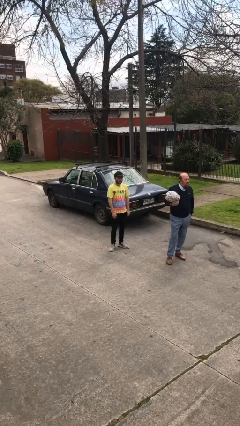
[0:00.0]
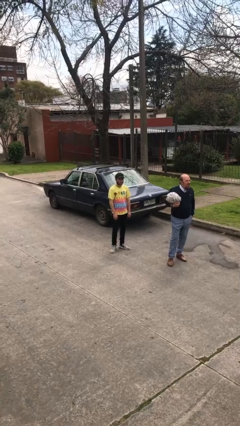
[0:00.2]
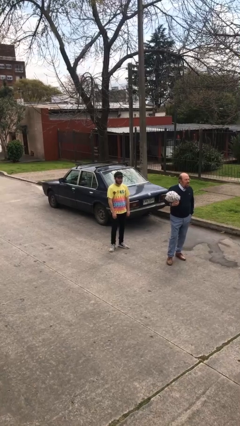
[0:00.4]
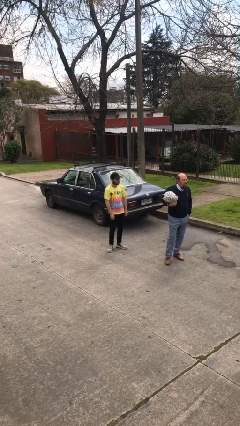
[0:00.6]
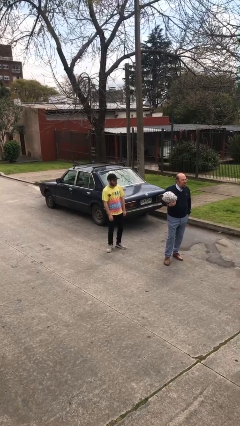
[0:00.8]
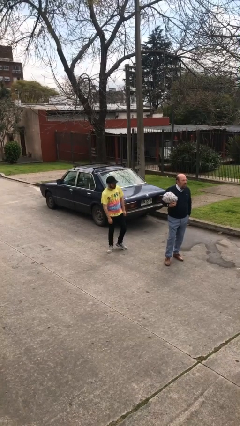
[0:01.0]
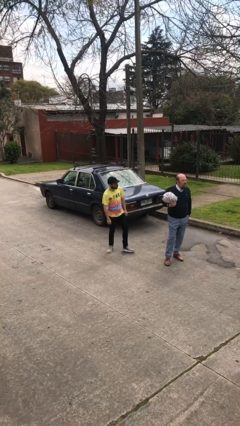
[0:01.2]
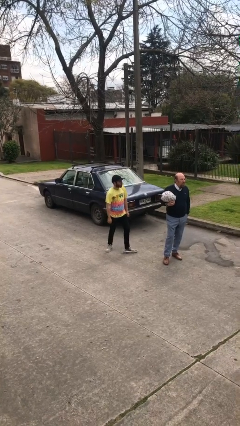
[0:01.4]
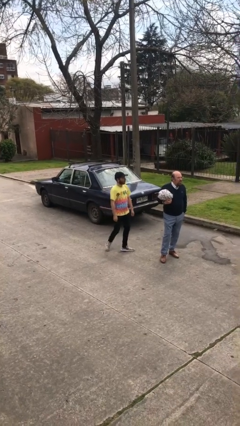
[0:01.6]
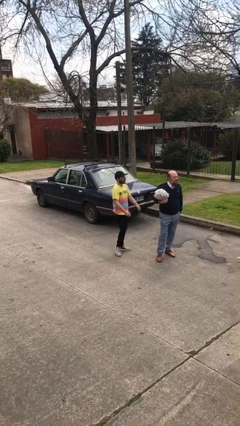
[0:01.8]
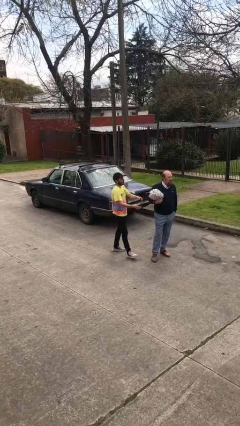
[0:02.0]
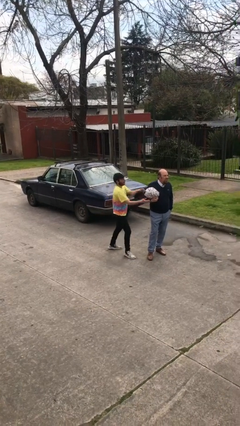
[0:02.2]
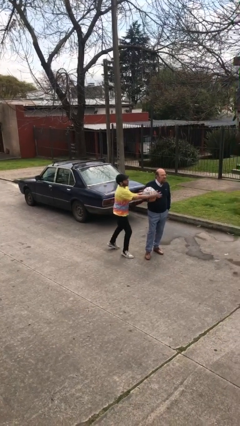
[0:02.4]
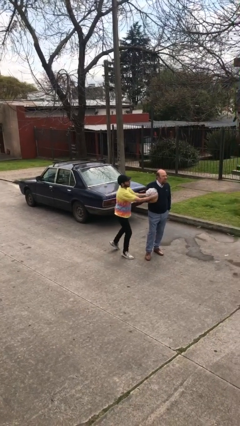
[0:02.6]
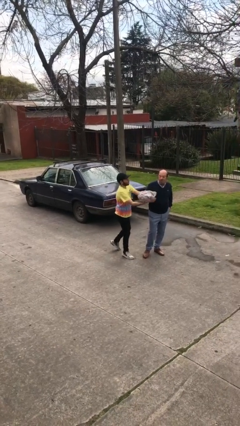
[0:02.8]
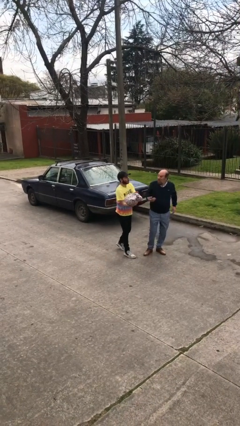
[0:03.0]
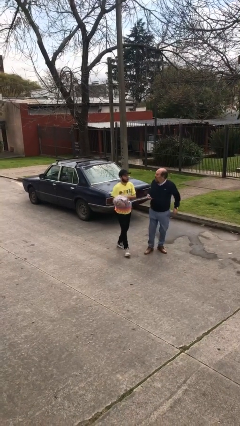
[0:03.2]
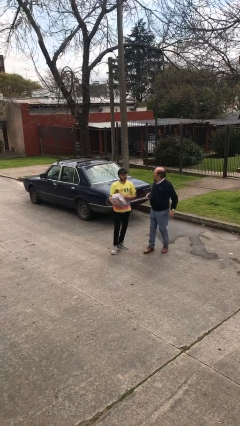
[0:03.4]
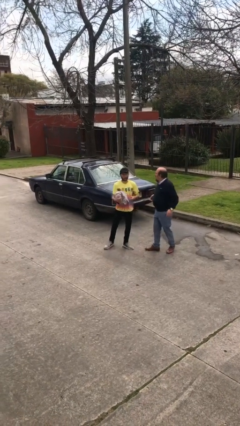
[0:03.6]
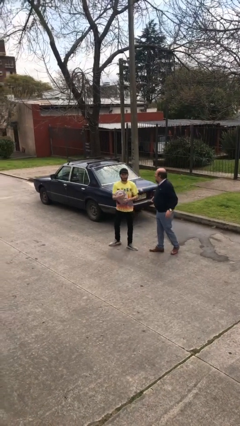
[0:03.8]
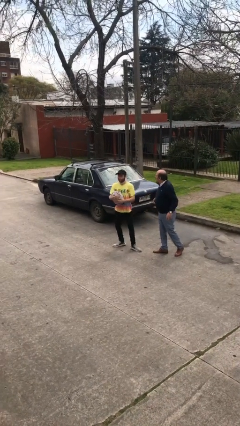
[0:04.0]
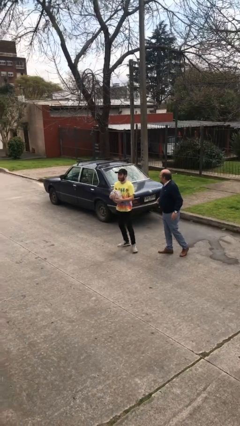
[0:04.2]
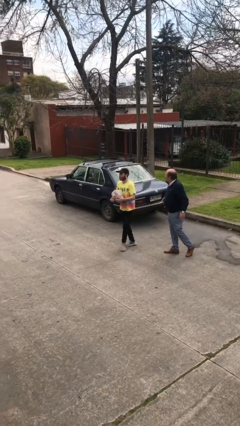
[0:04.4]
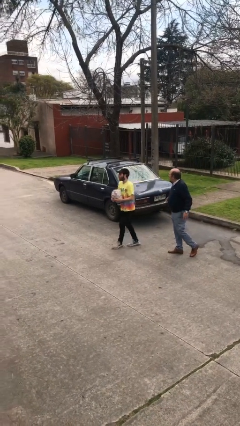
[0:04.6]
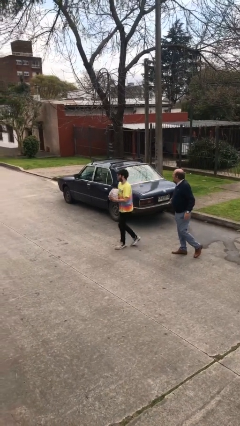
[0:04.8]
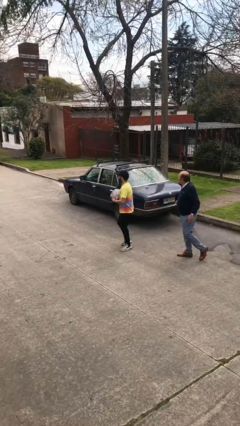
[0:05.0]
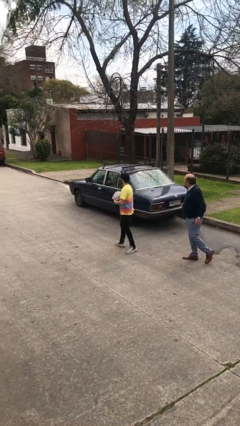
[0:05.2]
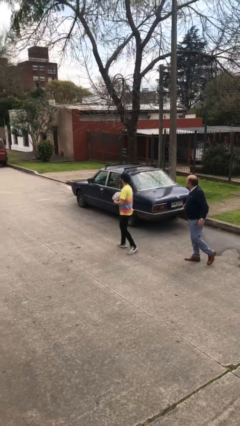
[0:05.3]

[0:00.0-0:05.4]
person steals object from person

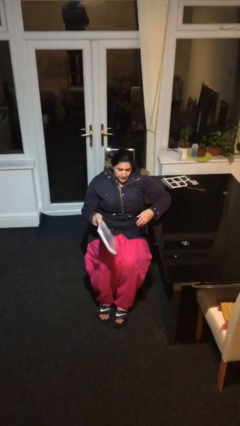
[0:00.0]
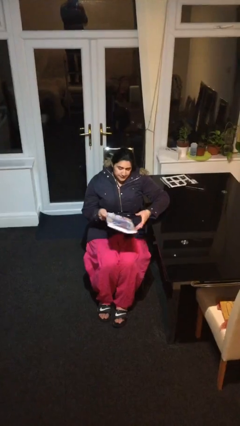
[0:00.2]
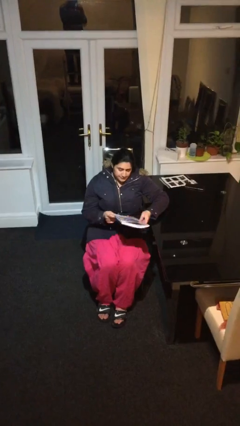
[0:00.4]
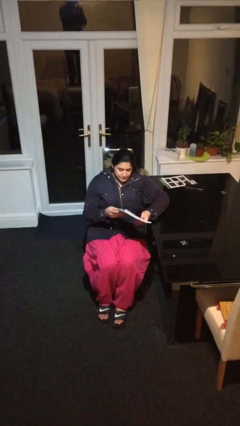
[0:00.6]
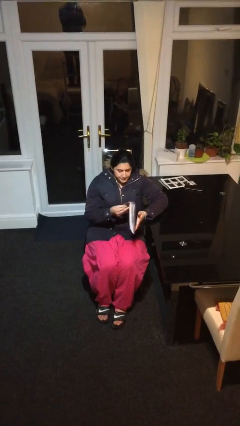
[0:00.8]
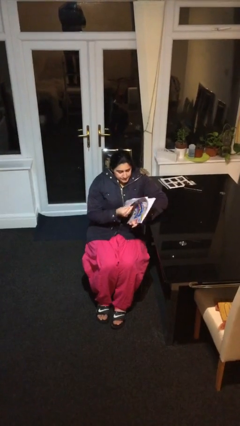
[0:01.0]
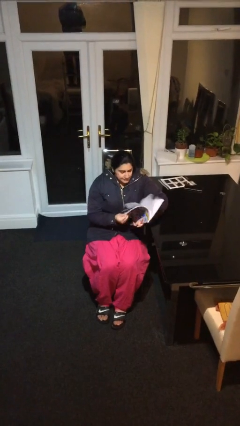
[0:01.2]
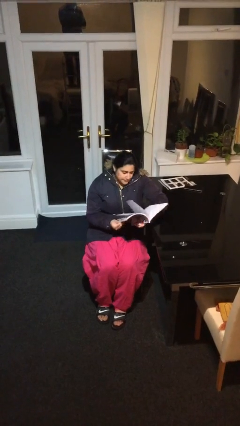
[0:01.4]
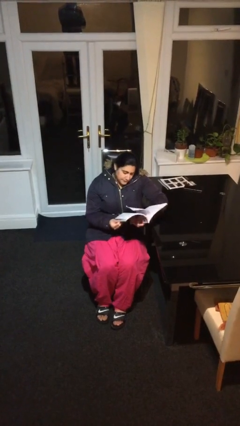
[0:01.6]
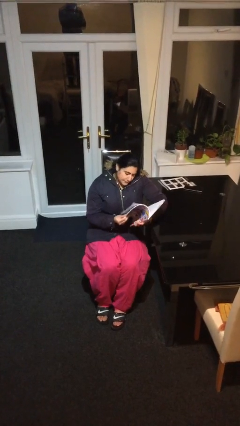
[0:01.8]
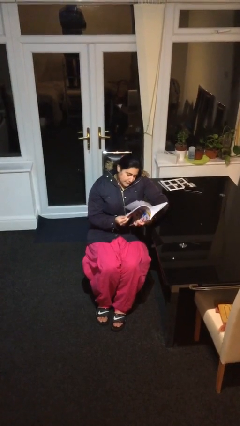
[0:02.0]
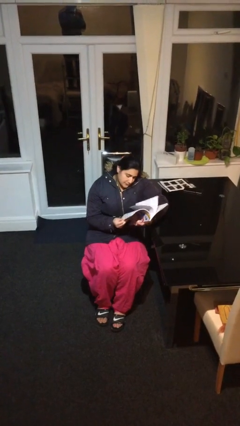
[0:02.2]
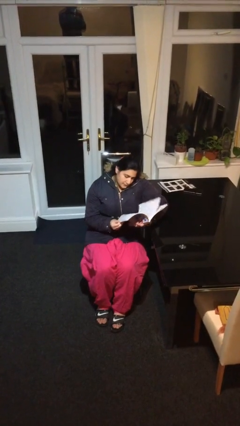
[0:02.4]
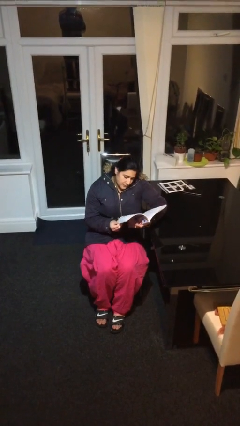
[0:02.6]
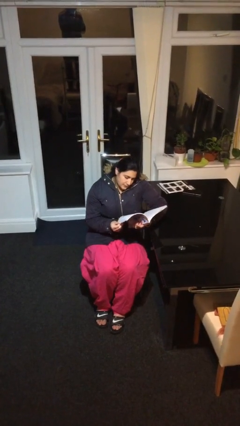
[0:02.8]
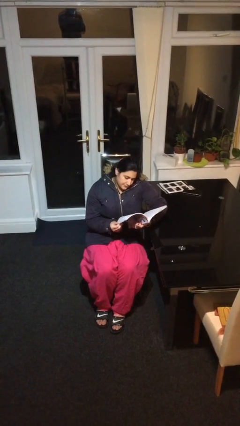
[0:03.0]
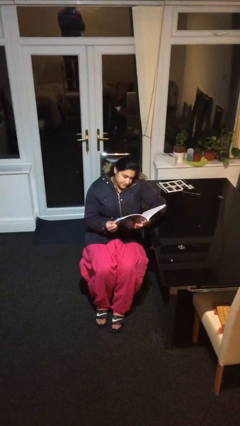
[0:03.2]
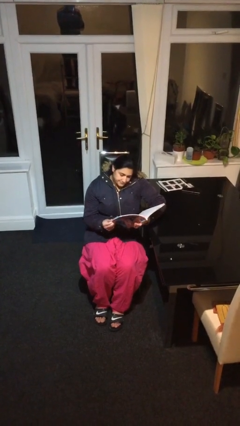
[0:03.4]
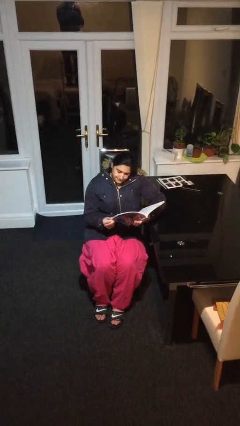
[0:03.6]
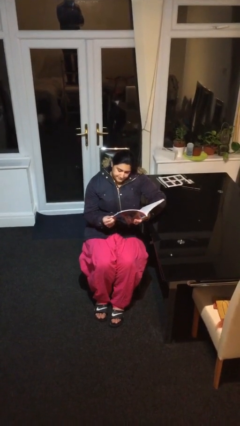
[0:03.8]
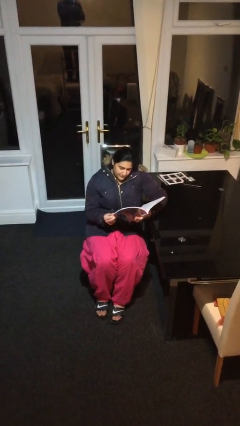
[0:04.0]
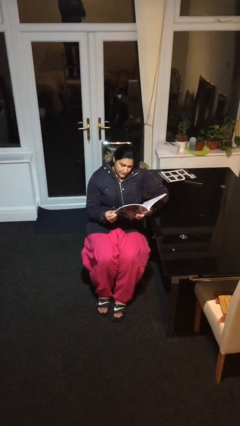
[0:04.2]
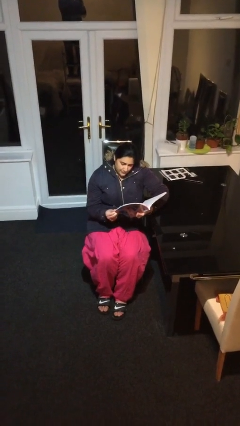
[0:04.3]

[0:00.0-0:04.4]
person reads document

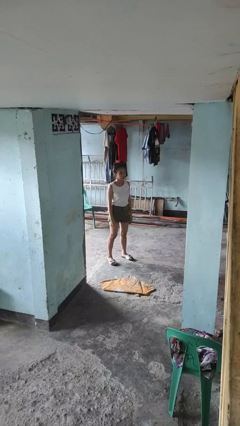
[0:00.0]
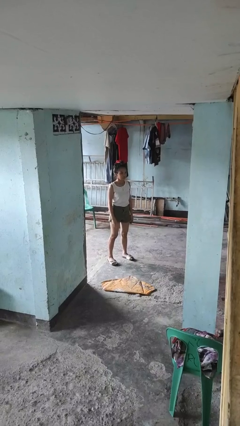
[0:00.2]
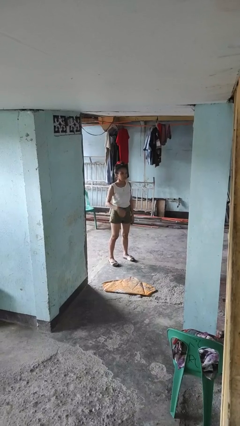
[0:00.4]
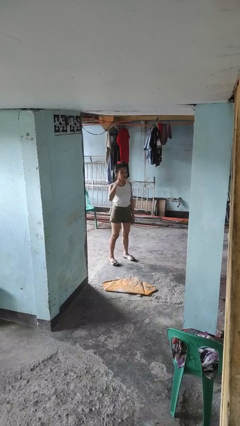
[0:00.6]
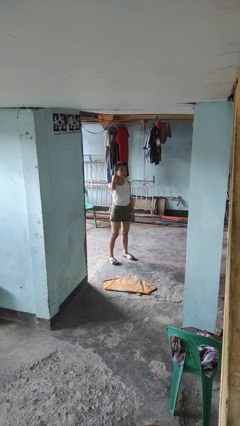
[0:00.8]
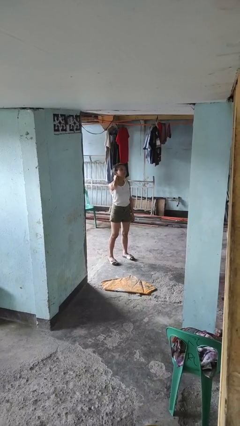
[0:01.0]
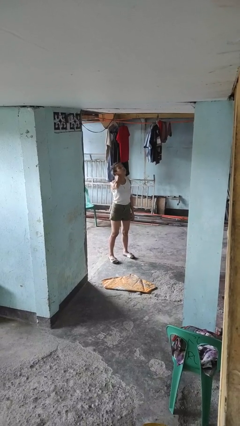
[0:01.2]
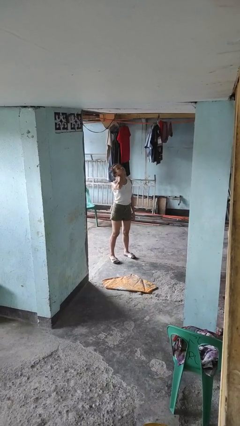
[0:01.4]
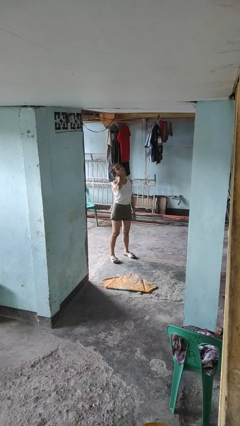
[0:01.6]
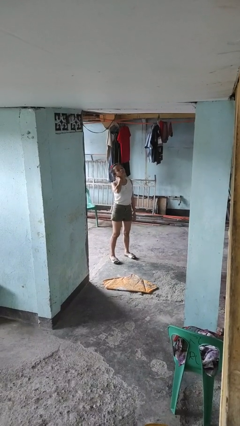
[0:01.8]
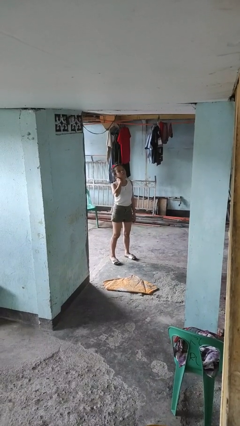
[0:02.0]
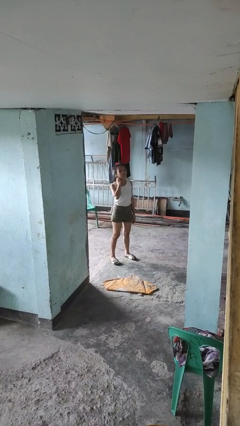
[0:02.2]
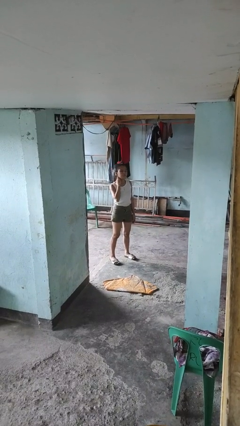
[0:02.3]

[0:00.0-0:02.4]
person rubs neck

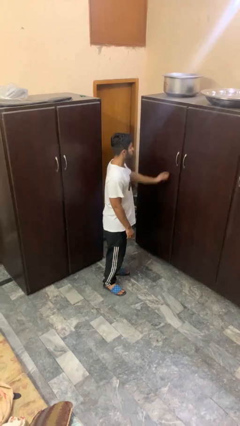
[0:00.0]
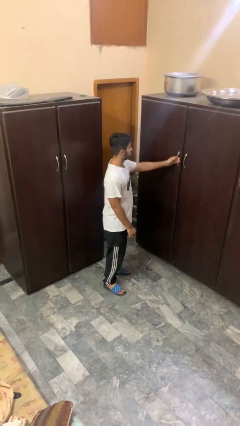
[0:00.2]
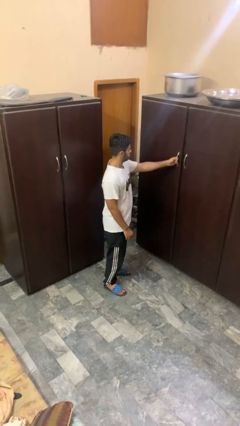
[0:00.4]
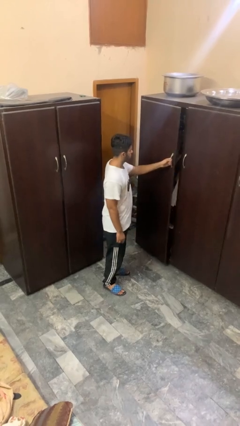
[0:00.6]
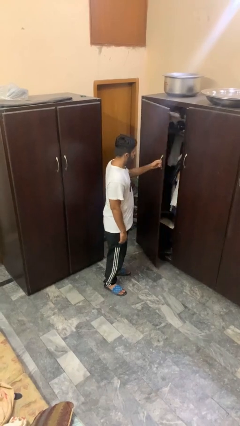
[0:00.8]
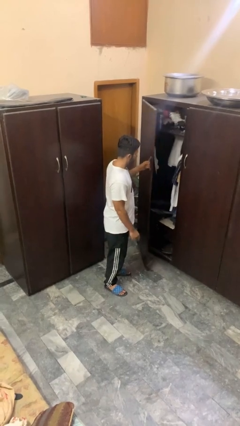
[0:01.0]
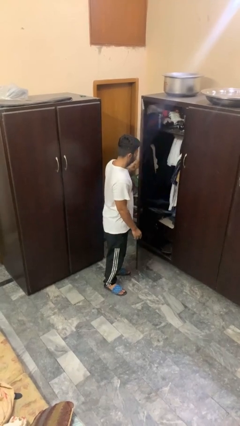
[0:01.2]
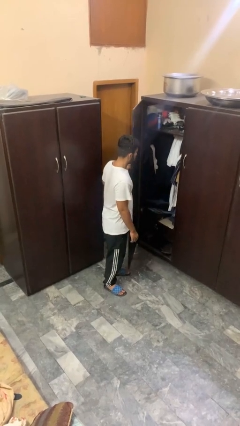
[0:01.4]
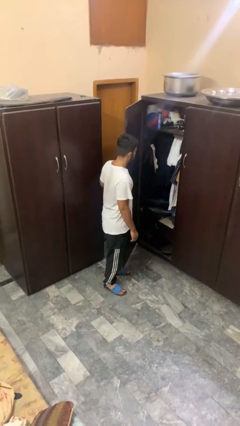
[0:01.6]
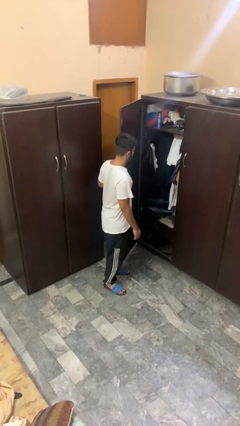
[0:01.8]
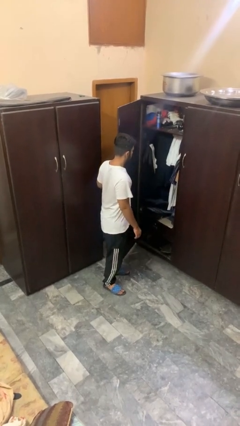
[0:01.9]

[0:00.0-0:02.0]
person opens closet door

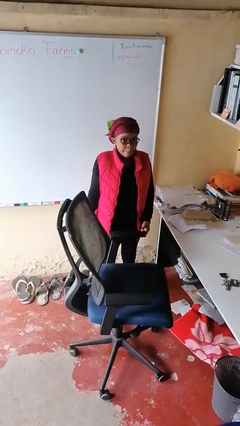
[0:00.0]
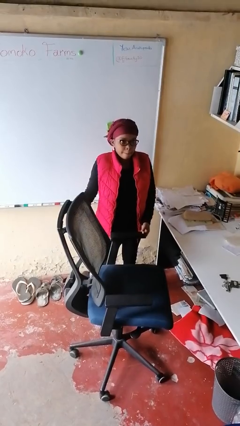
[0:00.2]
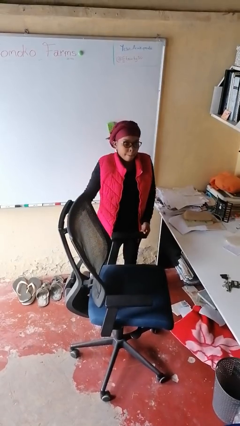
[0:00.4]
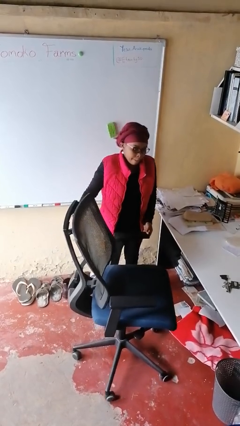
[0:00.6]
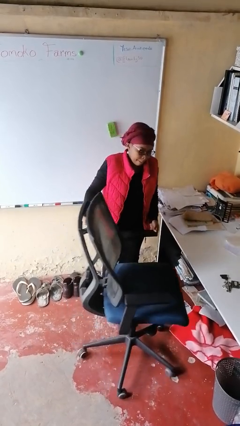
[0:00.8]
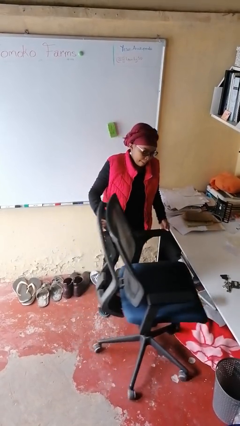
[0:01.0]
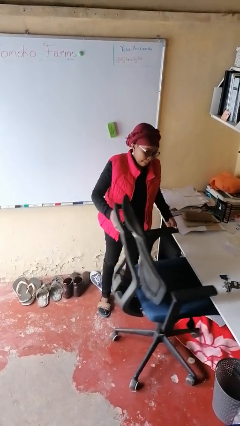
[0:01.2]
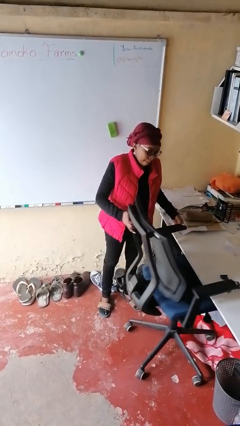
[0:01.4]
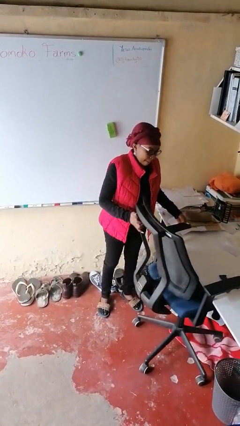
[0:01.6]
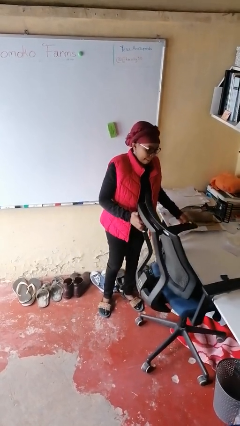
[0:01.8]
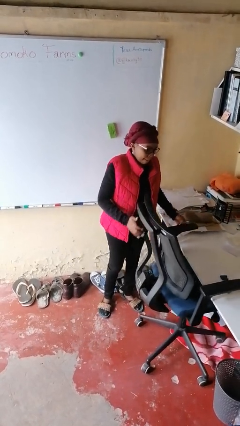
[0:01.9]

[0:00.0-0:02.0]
person pushes in chair

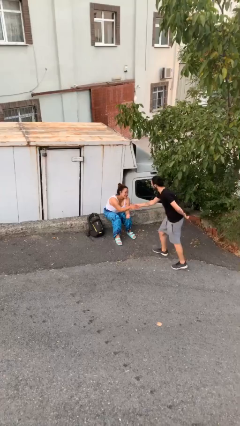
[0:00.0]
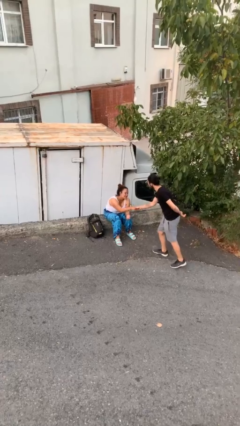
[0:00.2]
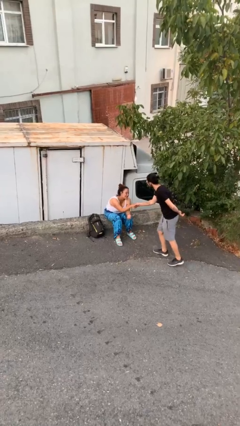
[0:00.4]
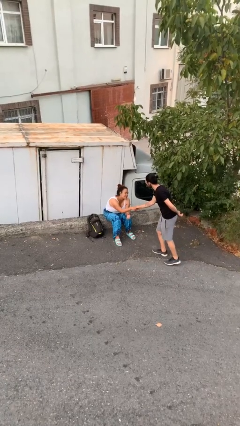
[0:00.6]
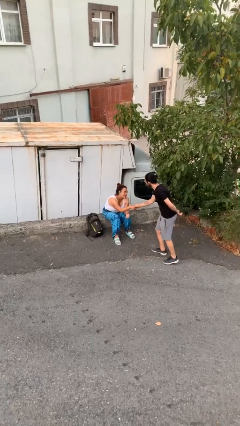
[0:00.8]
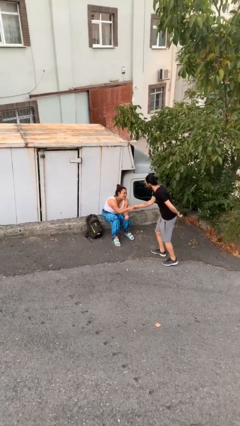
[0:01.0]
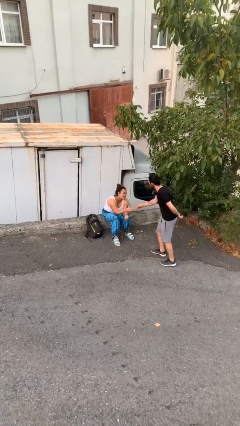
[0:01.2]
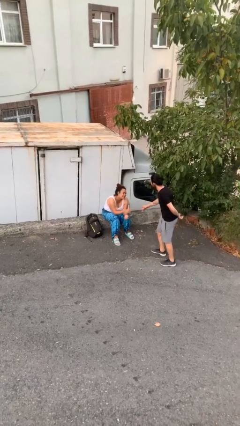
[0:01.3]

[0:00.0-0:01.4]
person shakes hand
